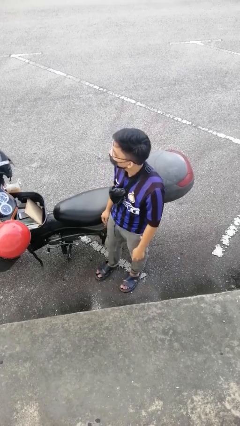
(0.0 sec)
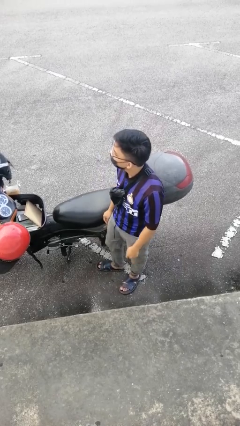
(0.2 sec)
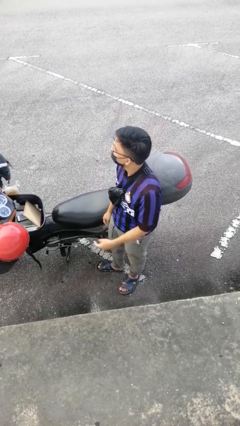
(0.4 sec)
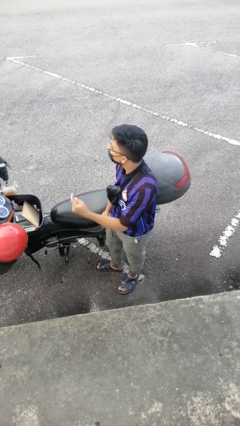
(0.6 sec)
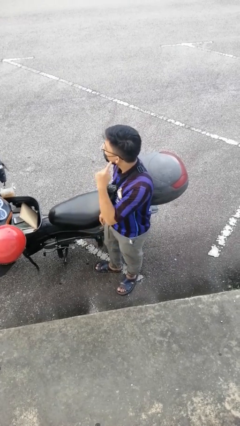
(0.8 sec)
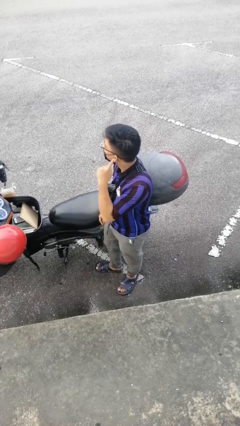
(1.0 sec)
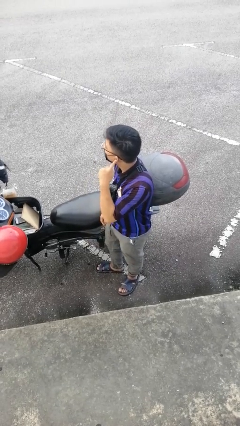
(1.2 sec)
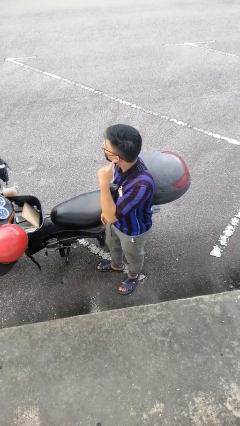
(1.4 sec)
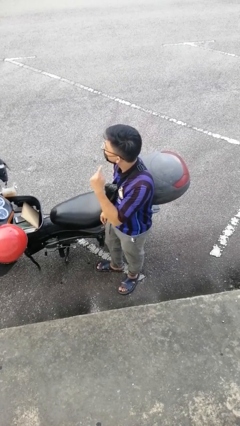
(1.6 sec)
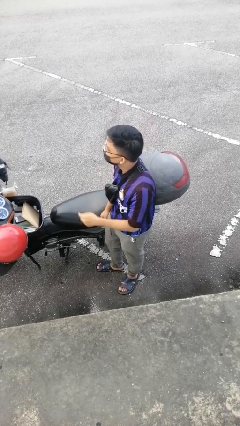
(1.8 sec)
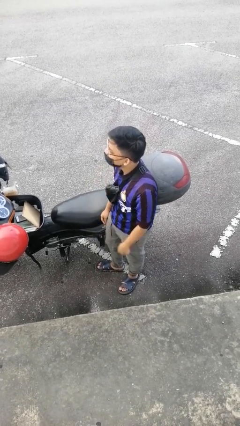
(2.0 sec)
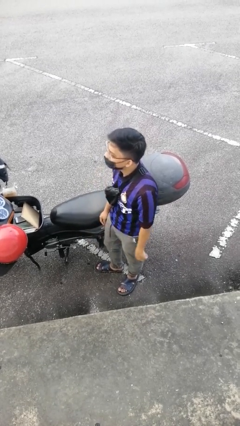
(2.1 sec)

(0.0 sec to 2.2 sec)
person gestures listen closely

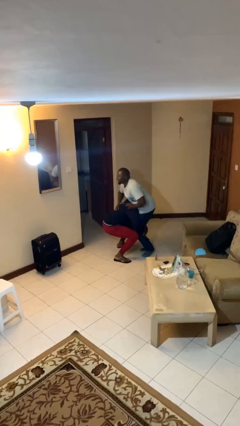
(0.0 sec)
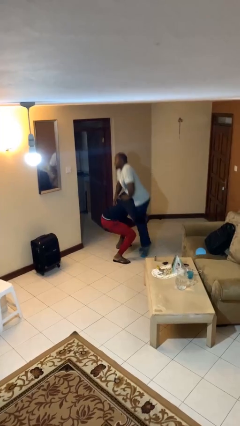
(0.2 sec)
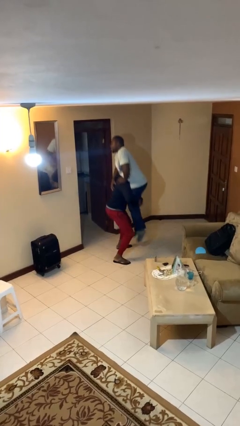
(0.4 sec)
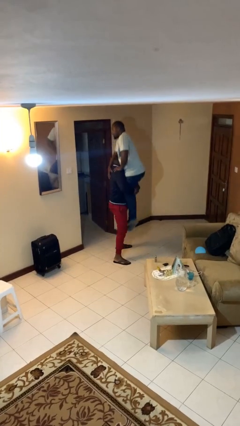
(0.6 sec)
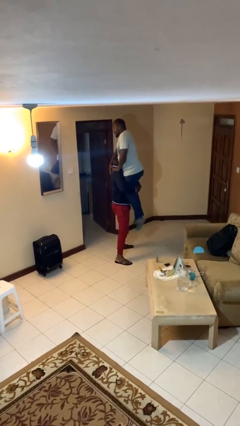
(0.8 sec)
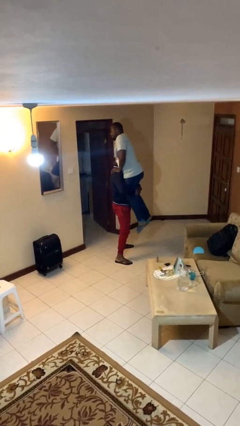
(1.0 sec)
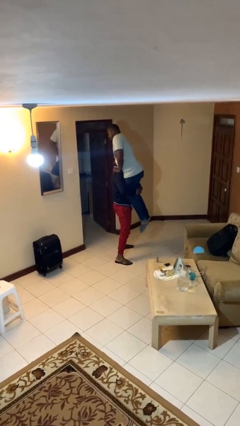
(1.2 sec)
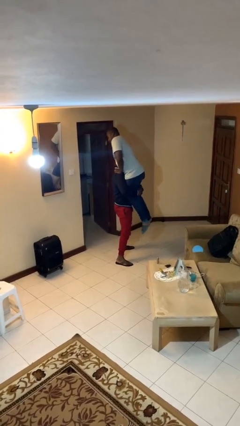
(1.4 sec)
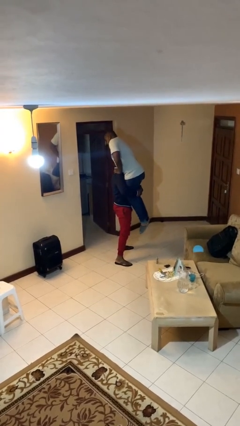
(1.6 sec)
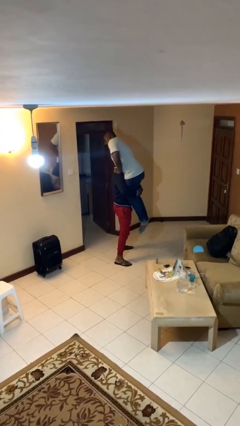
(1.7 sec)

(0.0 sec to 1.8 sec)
person picks up person

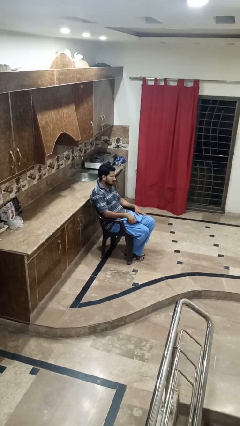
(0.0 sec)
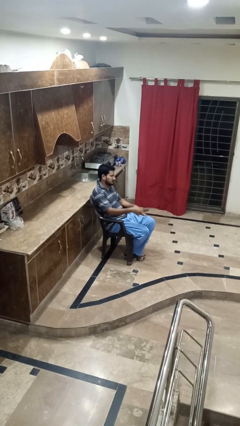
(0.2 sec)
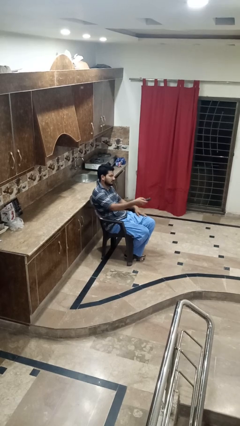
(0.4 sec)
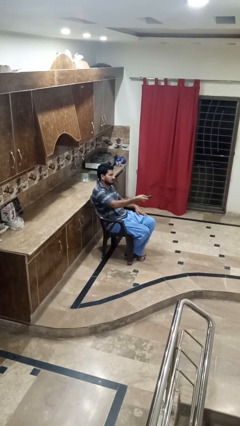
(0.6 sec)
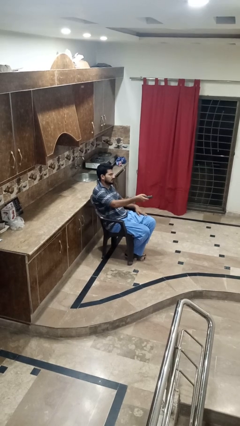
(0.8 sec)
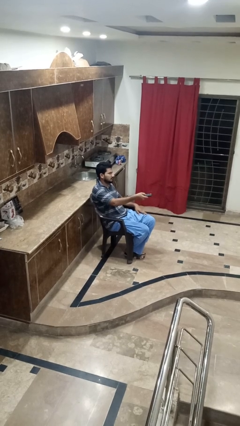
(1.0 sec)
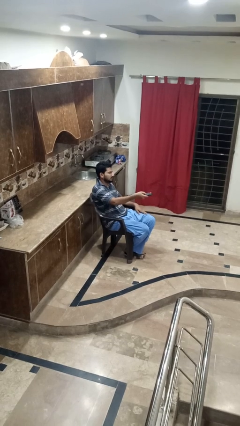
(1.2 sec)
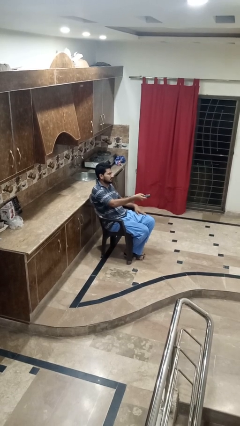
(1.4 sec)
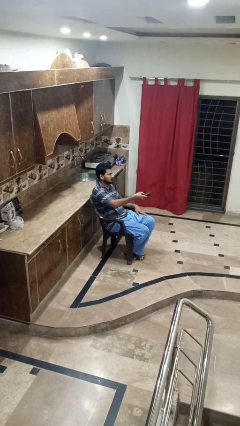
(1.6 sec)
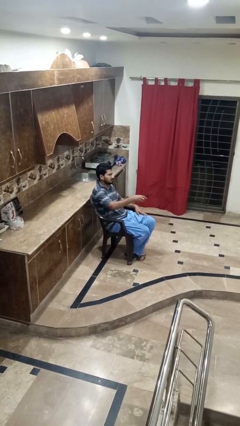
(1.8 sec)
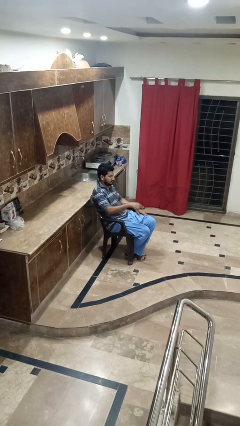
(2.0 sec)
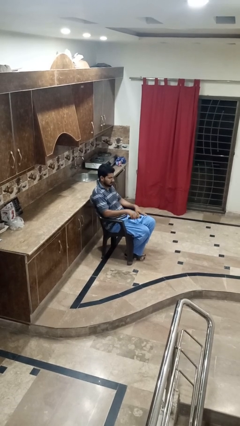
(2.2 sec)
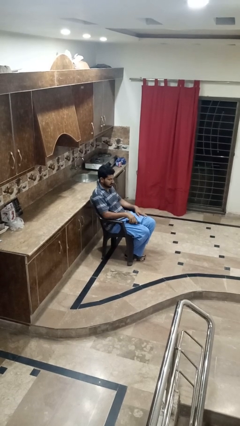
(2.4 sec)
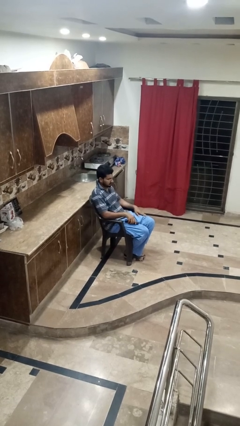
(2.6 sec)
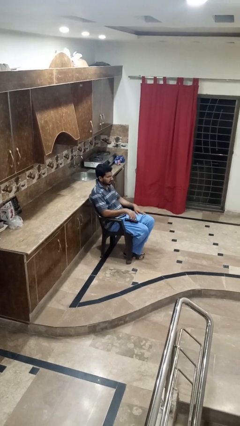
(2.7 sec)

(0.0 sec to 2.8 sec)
person uses television remote

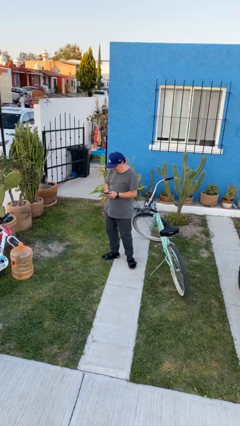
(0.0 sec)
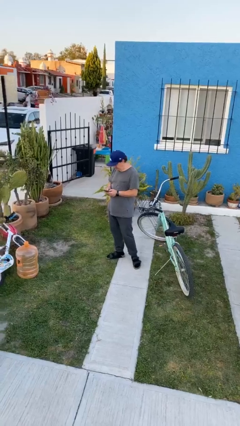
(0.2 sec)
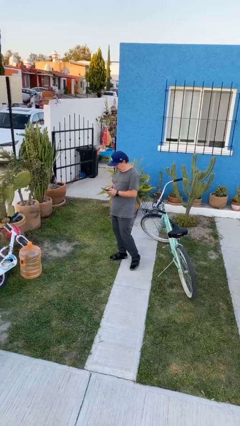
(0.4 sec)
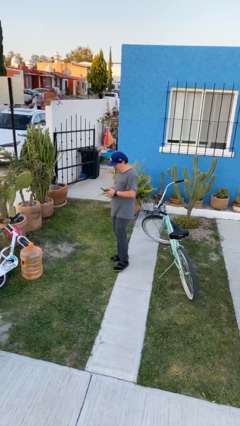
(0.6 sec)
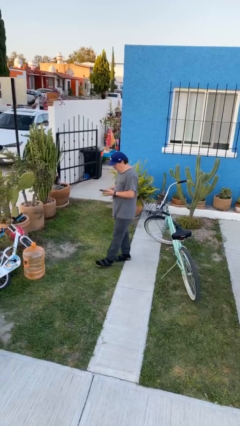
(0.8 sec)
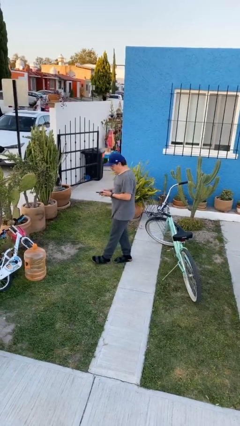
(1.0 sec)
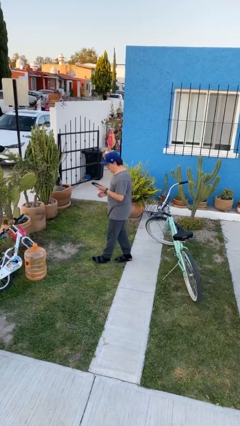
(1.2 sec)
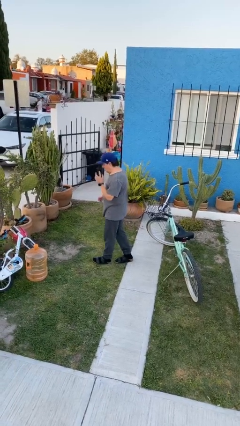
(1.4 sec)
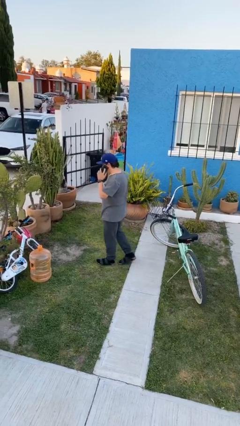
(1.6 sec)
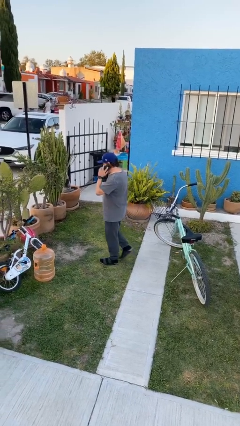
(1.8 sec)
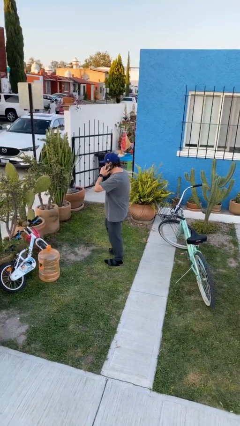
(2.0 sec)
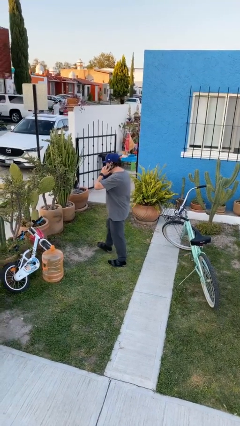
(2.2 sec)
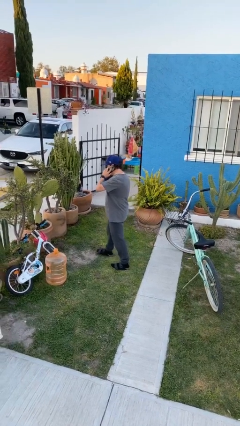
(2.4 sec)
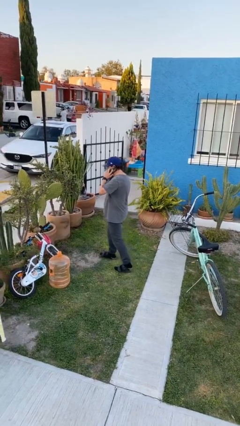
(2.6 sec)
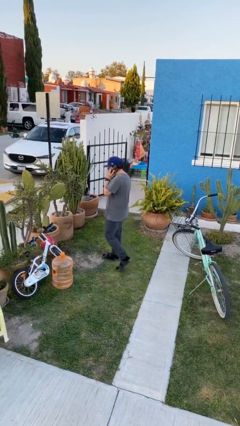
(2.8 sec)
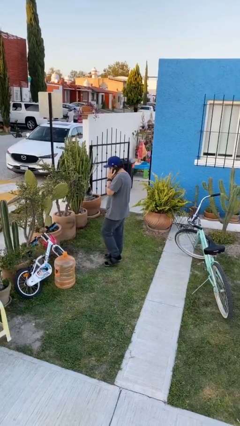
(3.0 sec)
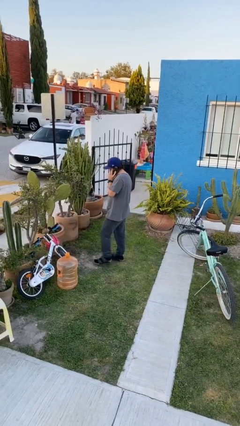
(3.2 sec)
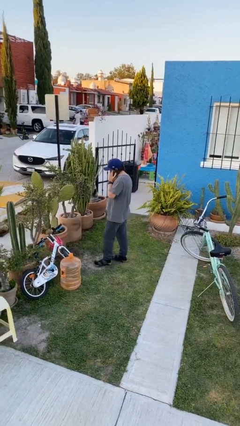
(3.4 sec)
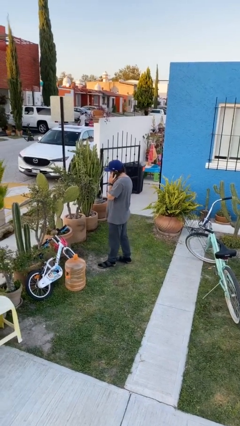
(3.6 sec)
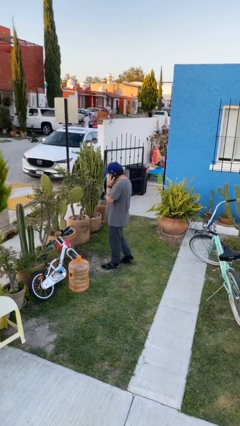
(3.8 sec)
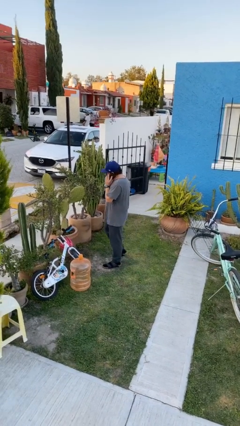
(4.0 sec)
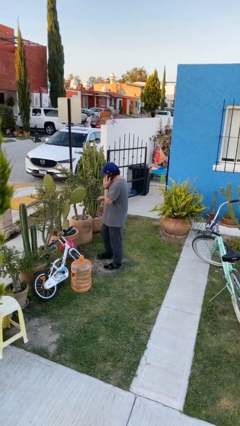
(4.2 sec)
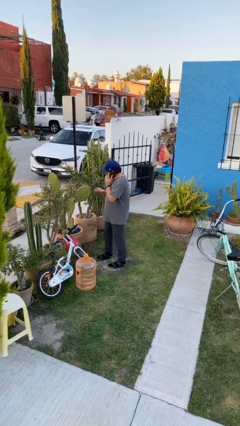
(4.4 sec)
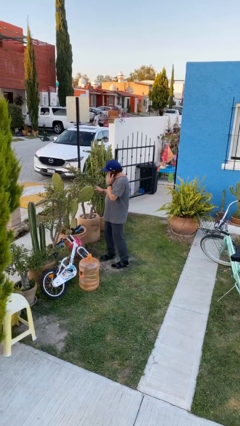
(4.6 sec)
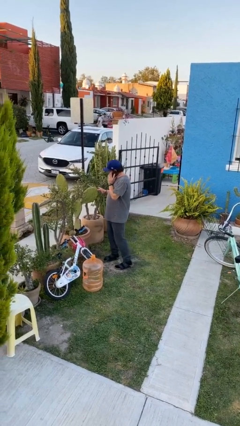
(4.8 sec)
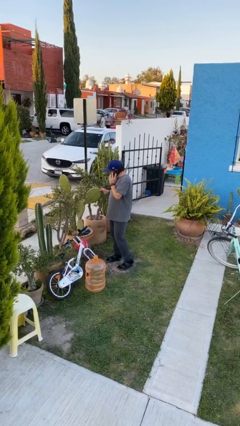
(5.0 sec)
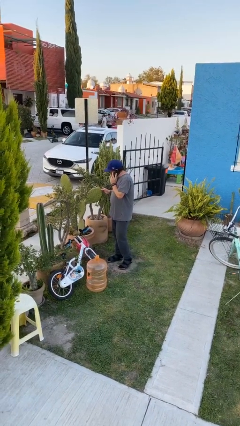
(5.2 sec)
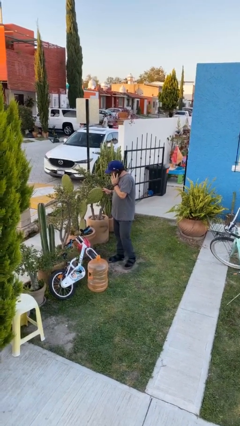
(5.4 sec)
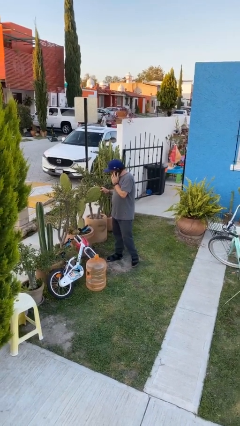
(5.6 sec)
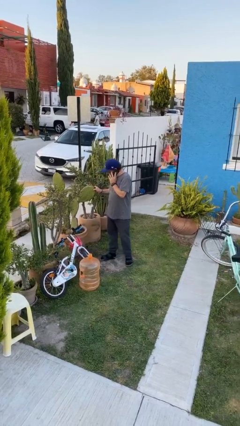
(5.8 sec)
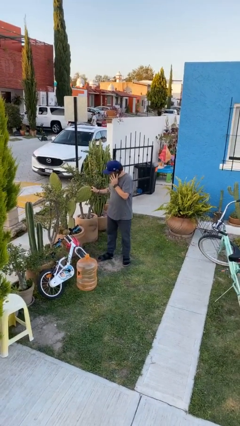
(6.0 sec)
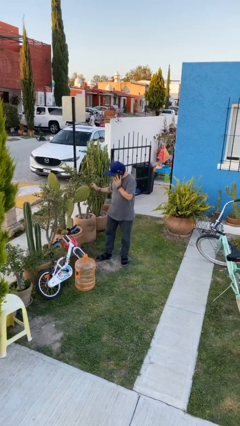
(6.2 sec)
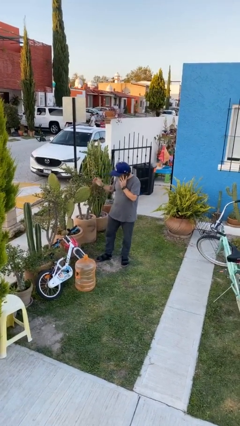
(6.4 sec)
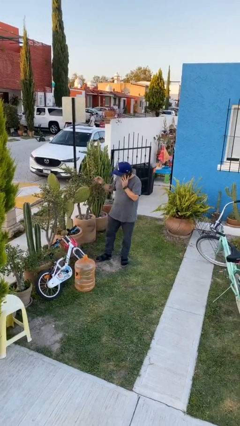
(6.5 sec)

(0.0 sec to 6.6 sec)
person talks on phone

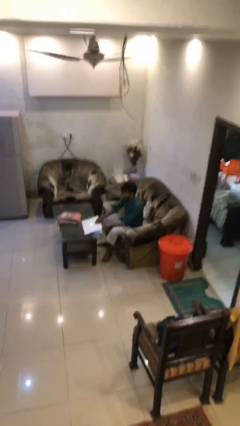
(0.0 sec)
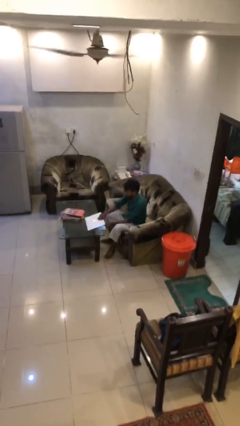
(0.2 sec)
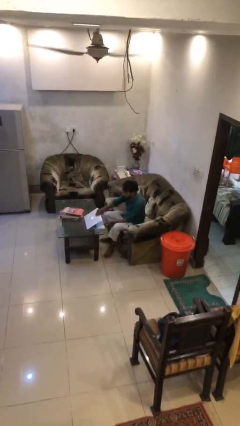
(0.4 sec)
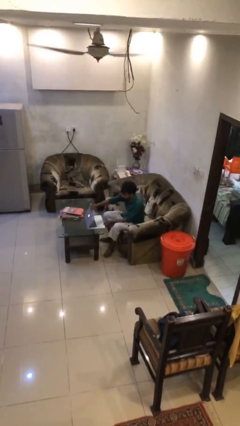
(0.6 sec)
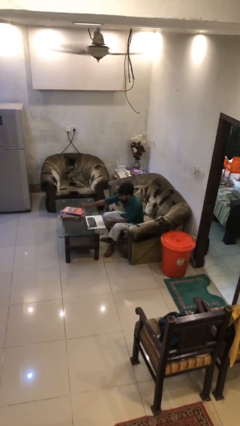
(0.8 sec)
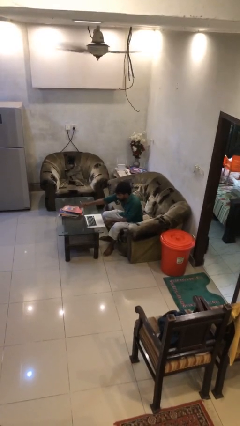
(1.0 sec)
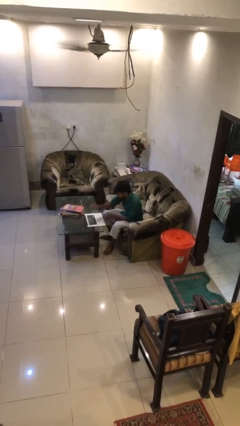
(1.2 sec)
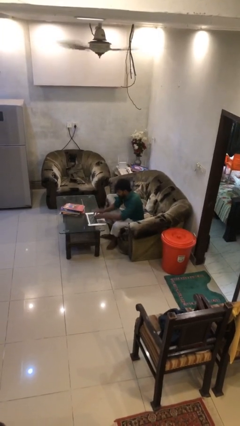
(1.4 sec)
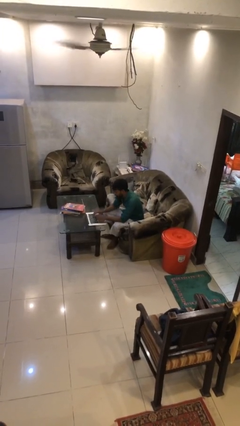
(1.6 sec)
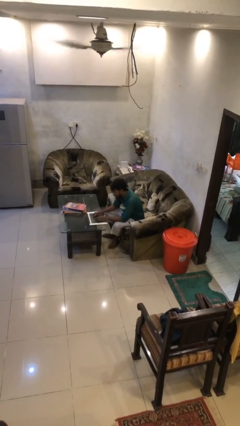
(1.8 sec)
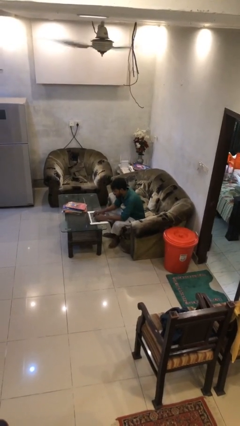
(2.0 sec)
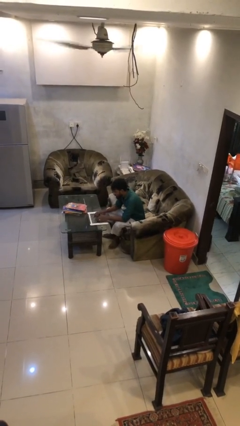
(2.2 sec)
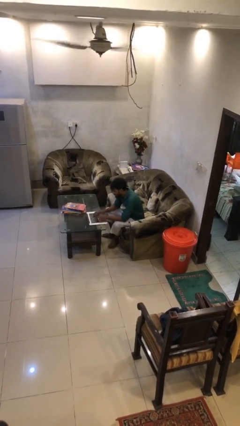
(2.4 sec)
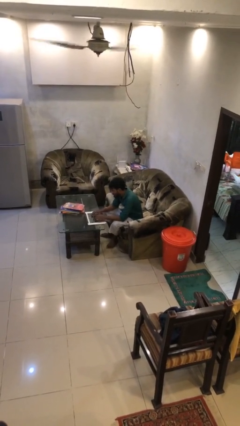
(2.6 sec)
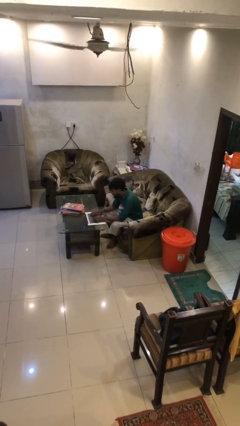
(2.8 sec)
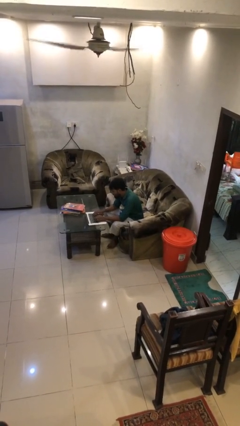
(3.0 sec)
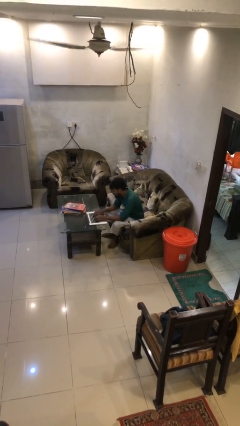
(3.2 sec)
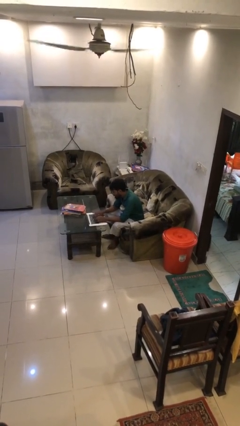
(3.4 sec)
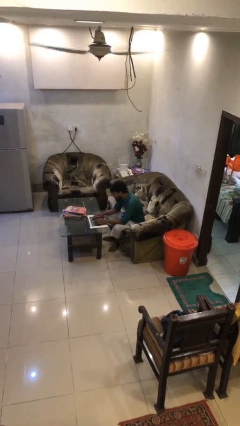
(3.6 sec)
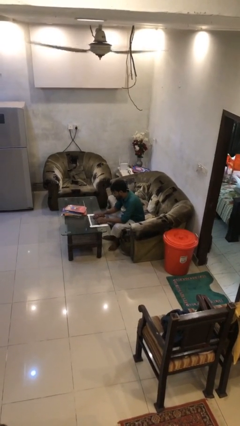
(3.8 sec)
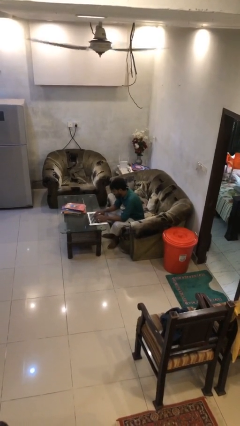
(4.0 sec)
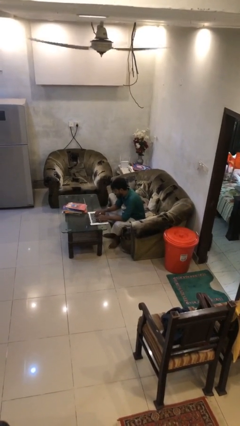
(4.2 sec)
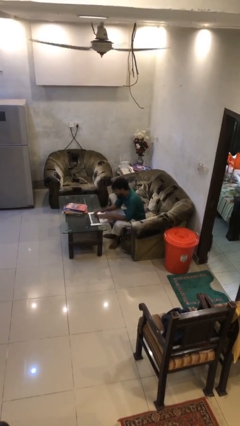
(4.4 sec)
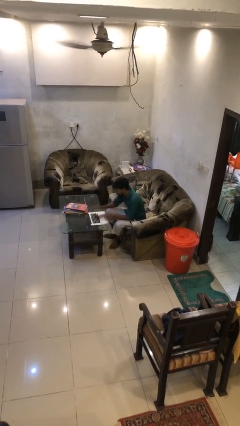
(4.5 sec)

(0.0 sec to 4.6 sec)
person interacts with laptop

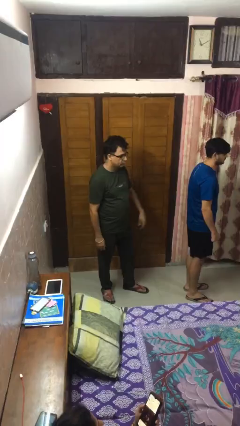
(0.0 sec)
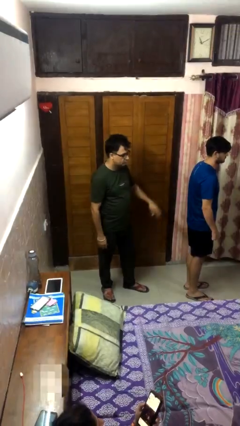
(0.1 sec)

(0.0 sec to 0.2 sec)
person touches back of person
